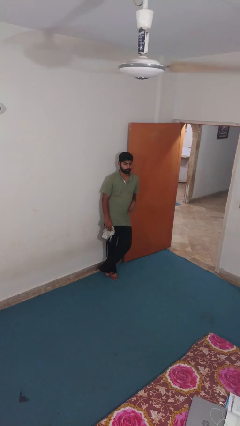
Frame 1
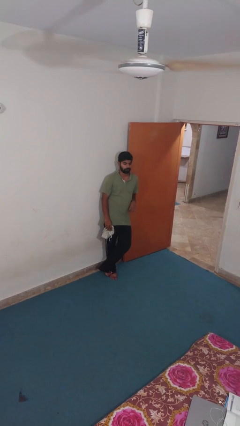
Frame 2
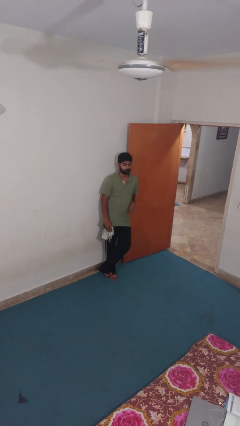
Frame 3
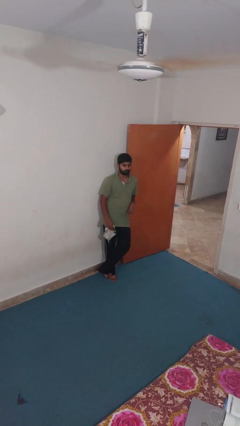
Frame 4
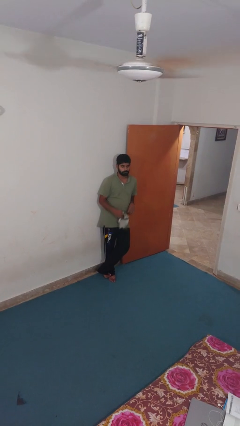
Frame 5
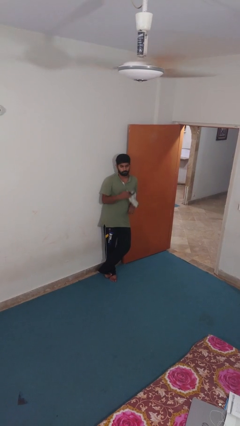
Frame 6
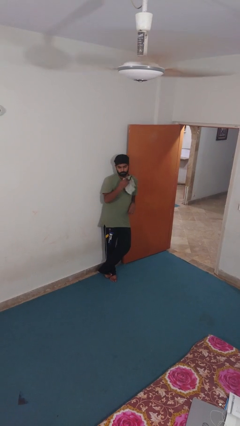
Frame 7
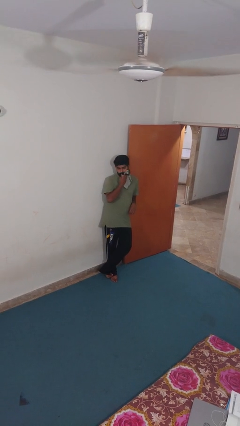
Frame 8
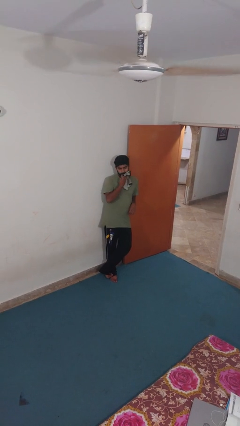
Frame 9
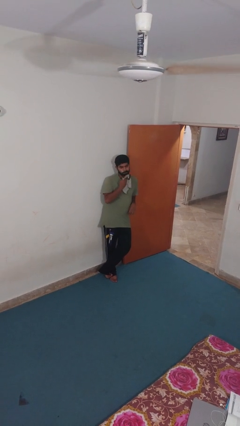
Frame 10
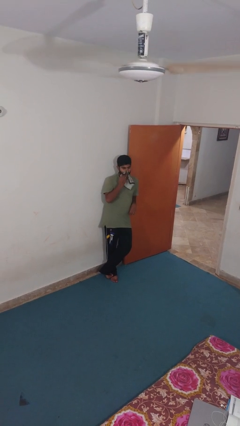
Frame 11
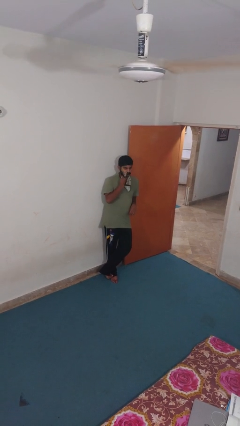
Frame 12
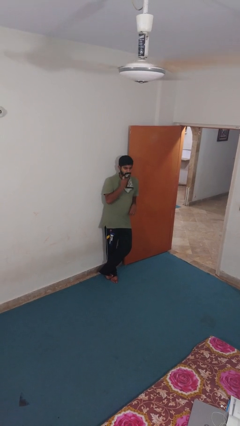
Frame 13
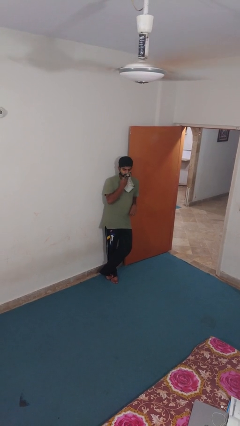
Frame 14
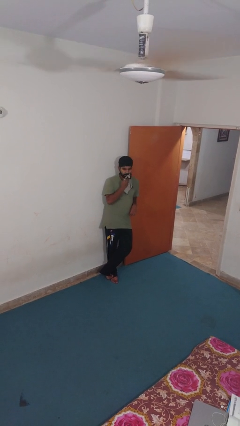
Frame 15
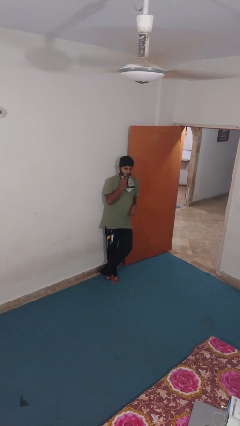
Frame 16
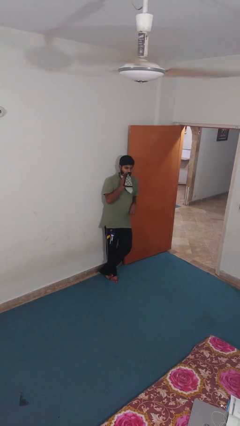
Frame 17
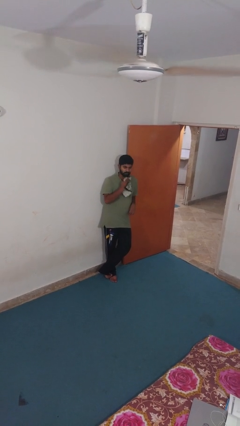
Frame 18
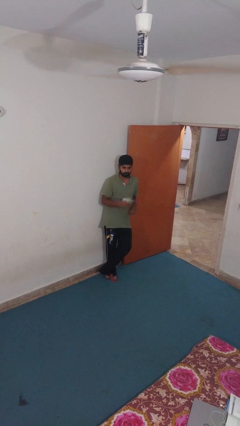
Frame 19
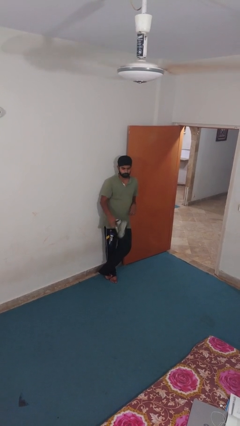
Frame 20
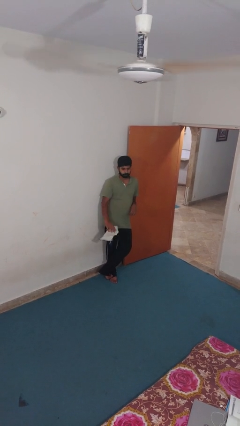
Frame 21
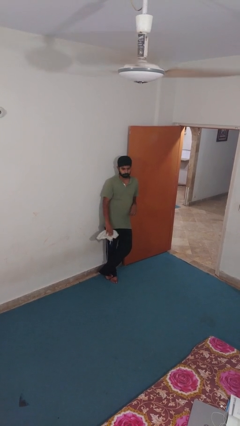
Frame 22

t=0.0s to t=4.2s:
person wipes mouth with napkin

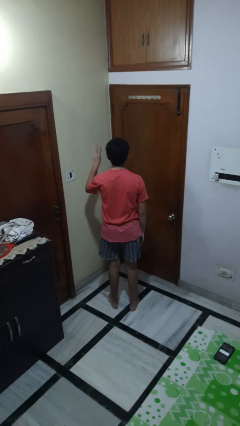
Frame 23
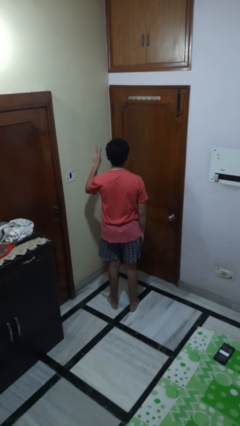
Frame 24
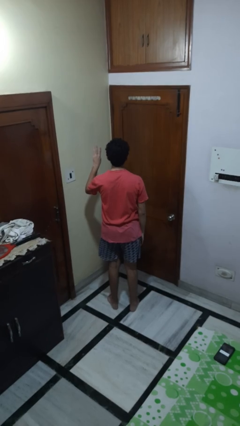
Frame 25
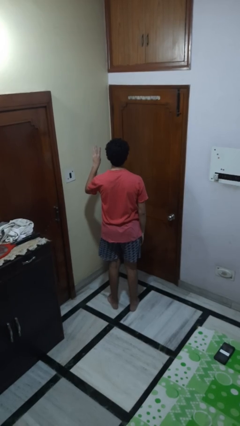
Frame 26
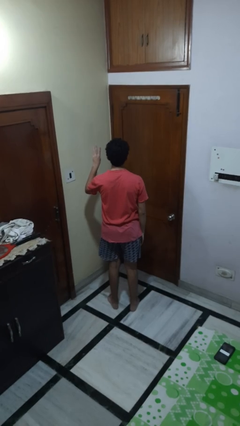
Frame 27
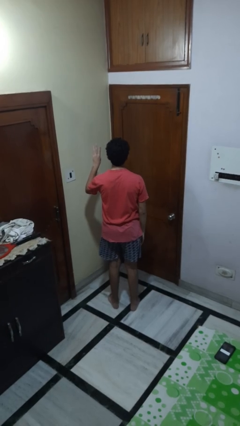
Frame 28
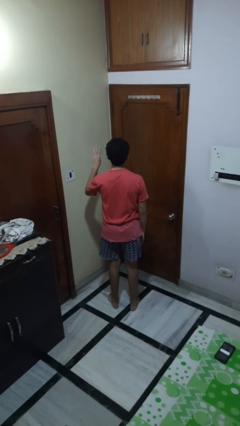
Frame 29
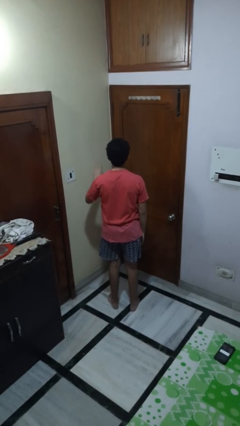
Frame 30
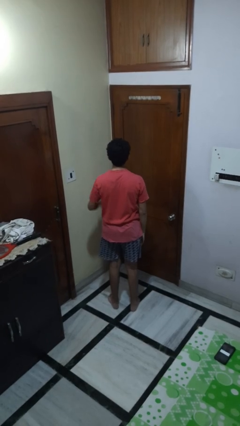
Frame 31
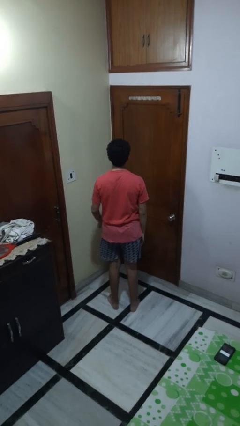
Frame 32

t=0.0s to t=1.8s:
person gestures number three

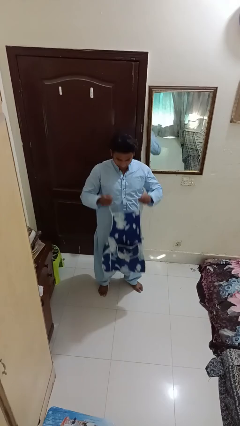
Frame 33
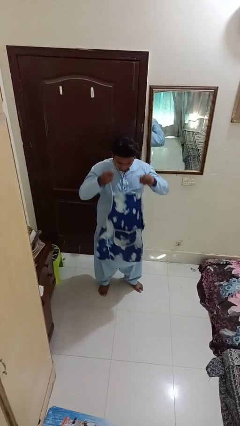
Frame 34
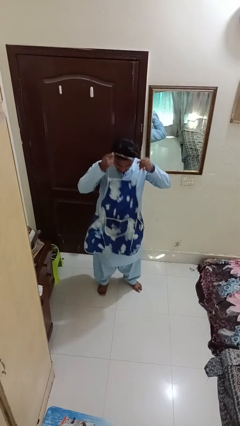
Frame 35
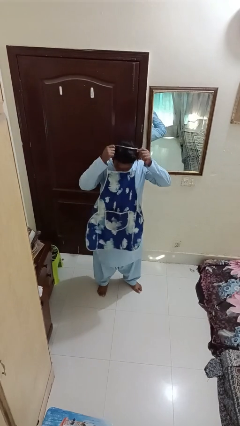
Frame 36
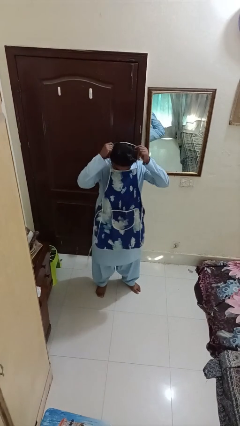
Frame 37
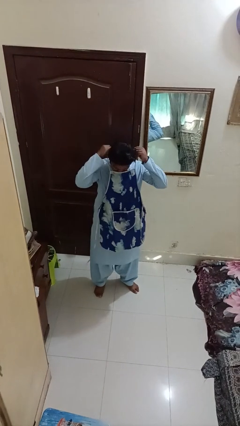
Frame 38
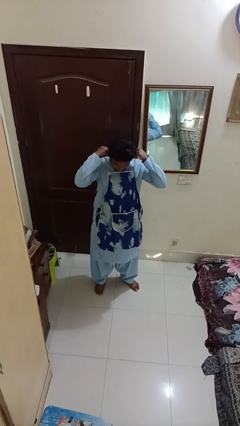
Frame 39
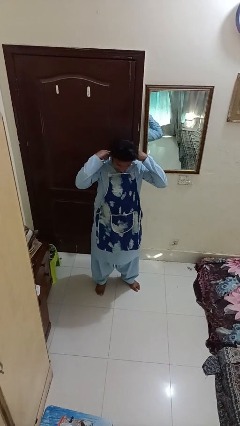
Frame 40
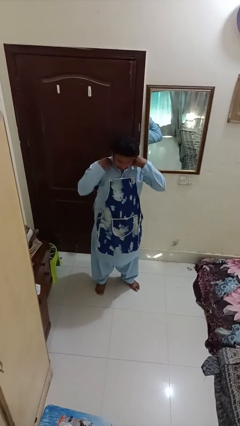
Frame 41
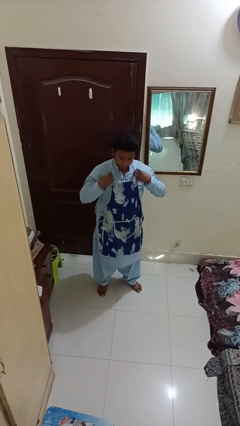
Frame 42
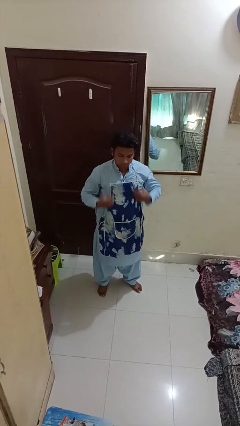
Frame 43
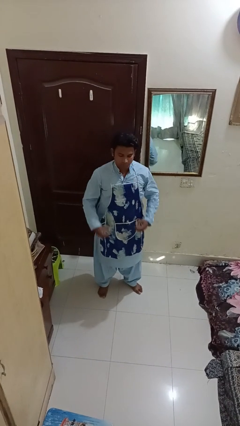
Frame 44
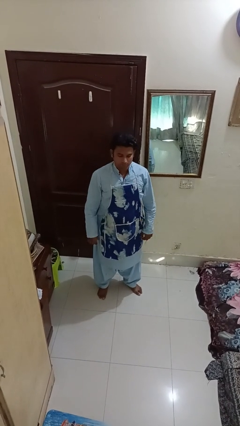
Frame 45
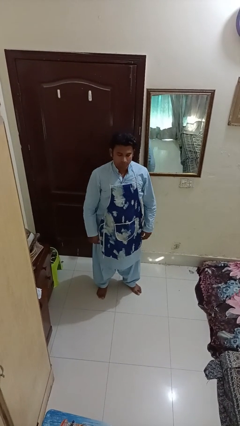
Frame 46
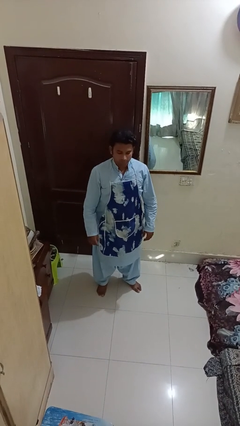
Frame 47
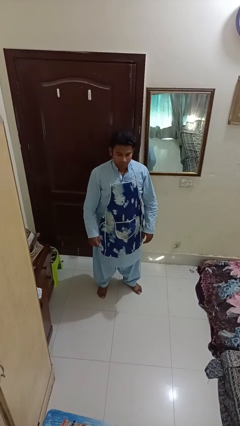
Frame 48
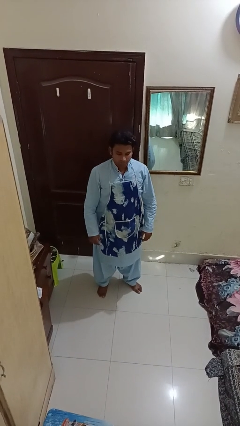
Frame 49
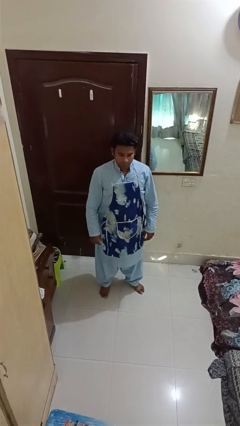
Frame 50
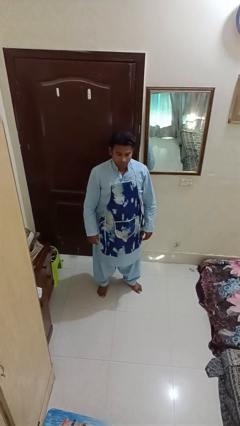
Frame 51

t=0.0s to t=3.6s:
person puts on apron

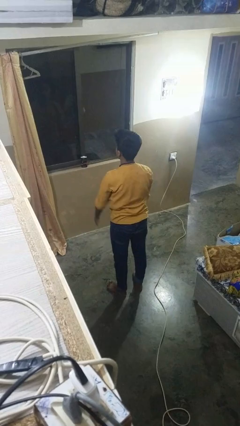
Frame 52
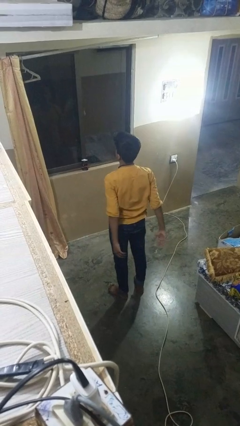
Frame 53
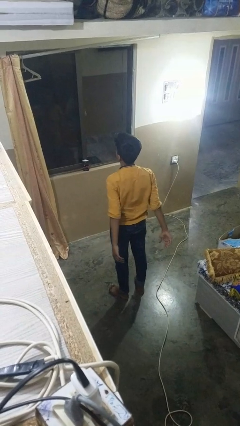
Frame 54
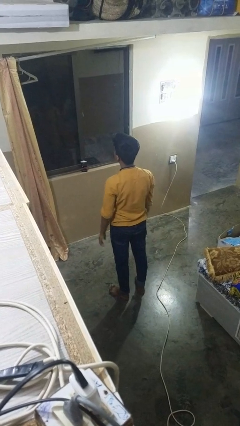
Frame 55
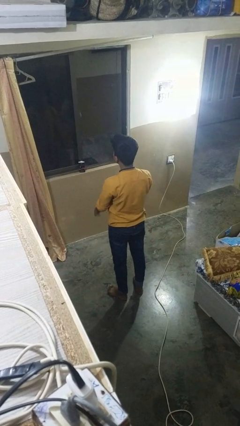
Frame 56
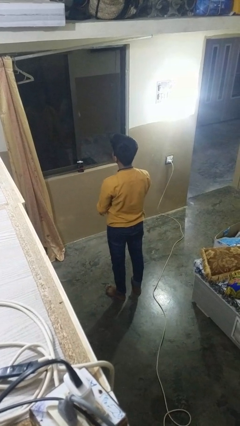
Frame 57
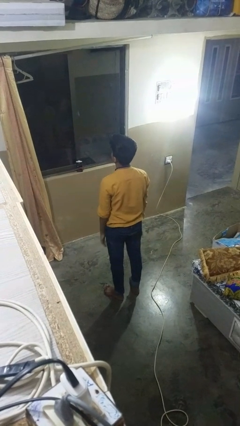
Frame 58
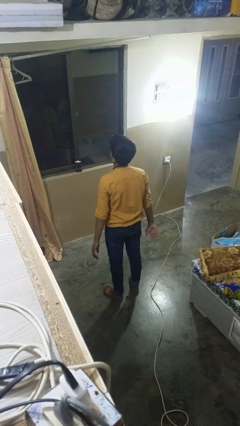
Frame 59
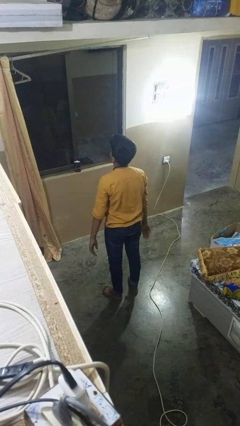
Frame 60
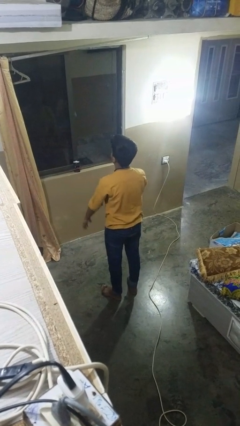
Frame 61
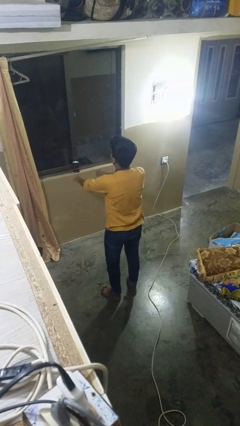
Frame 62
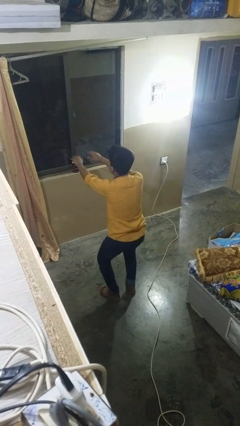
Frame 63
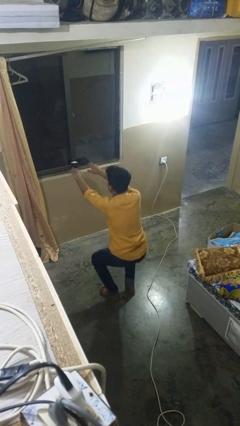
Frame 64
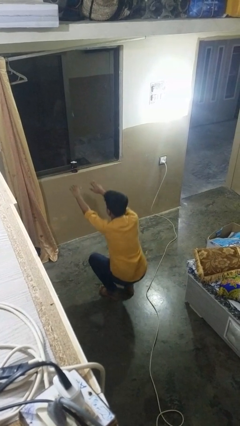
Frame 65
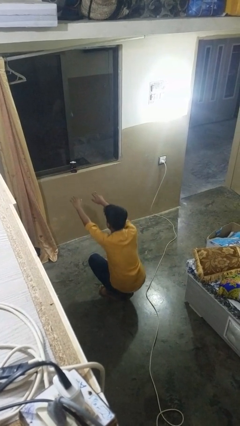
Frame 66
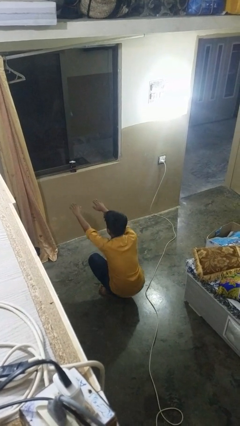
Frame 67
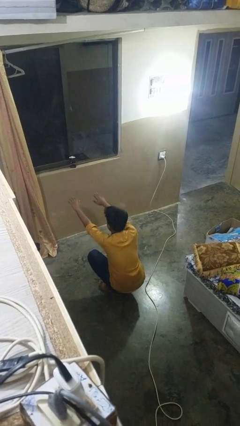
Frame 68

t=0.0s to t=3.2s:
person squats

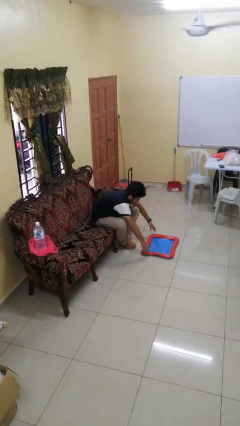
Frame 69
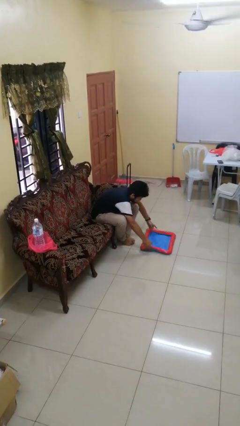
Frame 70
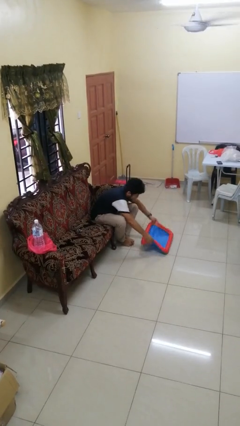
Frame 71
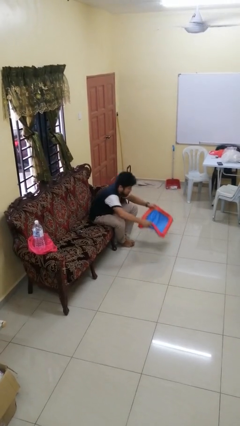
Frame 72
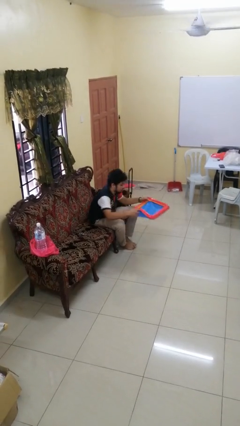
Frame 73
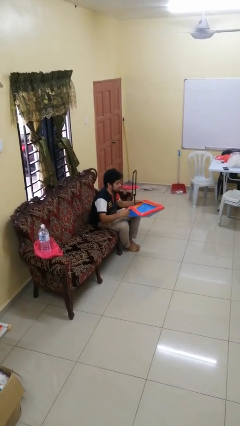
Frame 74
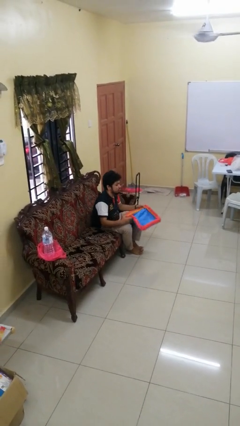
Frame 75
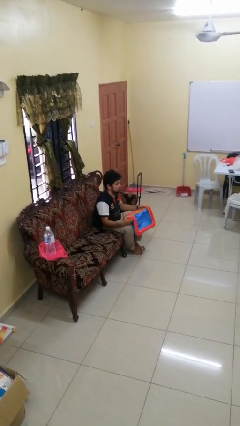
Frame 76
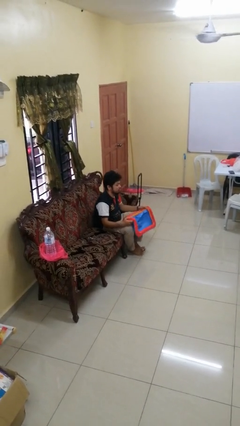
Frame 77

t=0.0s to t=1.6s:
person picks up object from floor

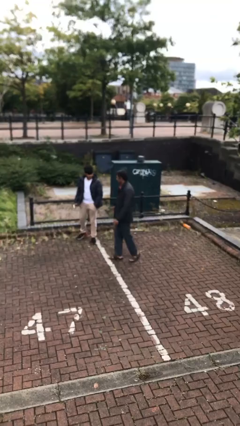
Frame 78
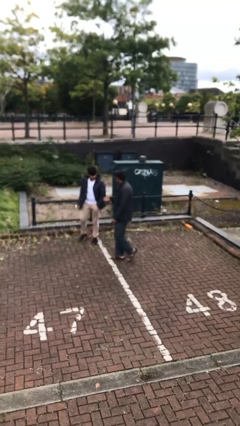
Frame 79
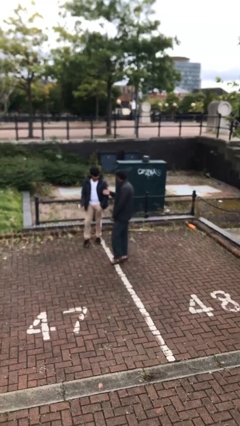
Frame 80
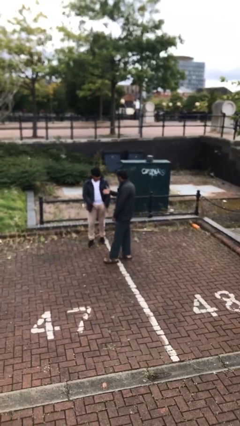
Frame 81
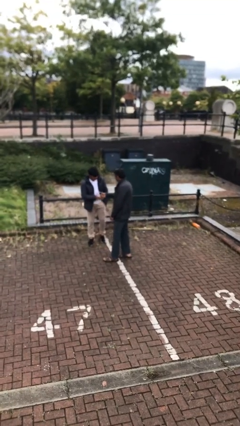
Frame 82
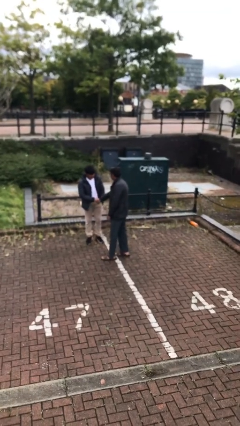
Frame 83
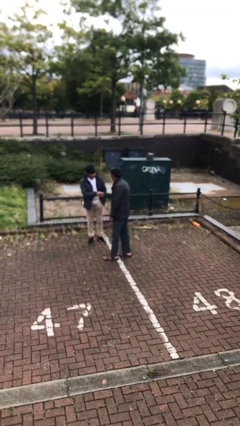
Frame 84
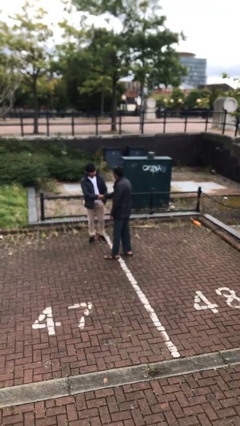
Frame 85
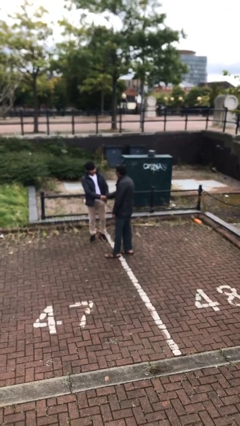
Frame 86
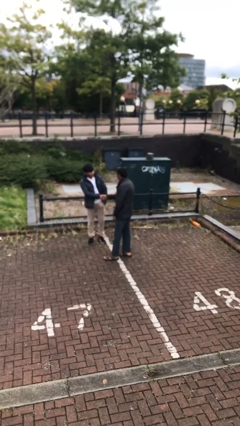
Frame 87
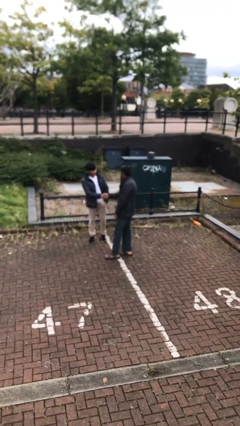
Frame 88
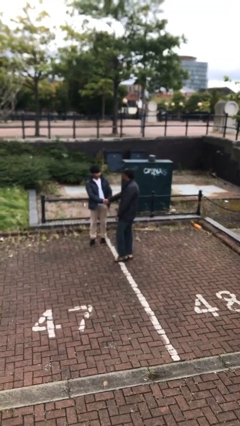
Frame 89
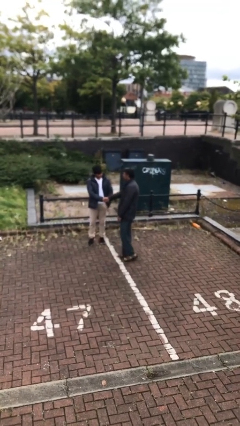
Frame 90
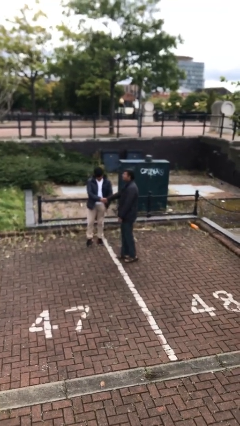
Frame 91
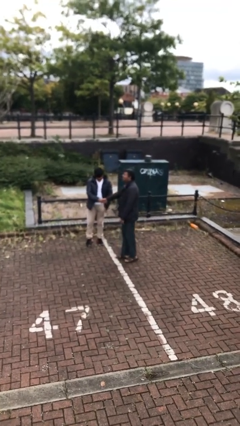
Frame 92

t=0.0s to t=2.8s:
person shakes hand
